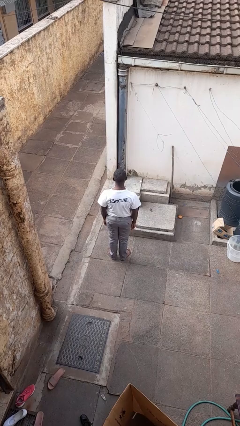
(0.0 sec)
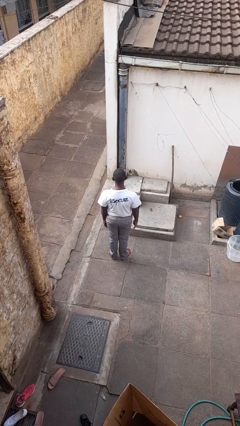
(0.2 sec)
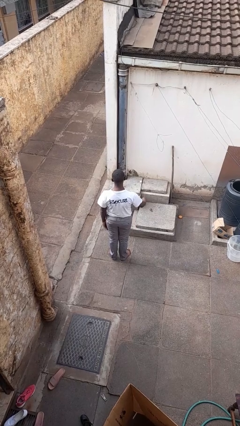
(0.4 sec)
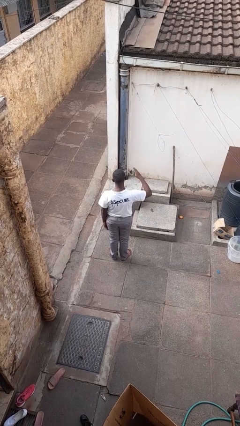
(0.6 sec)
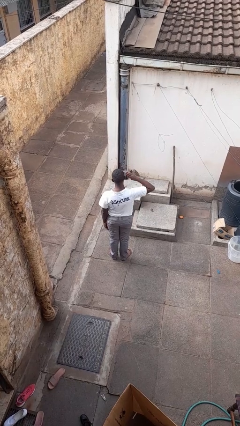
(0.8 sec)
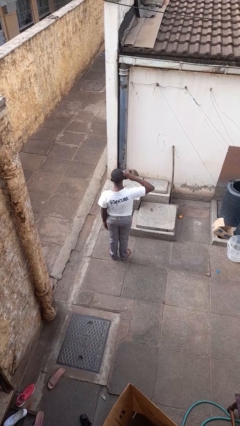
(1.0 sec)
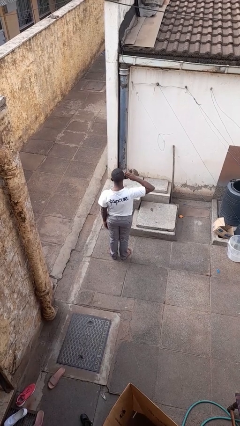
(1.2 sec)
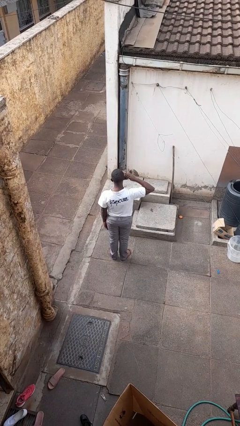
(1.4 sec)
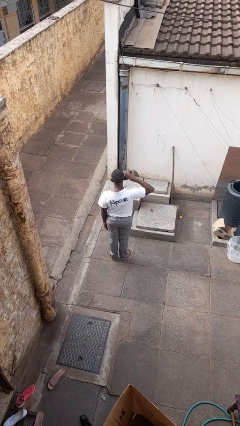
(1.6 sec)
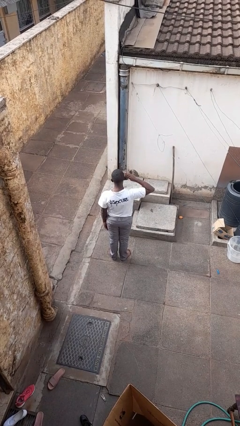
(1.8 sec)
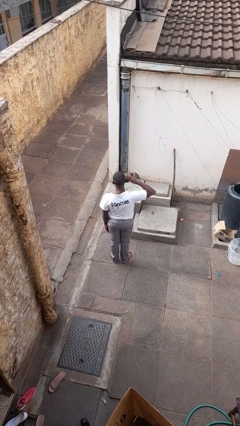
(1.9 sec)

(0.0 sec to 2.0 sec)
person salutes

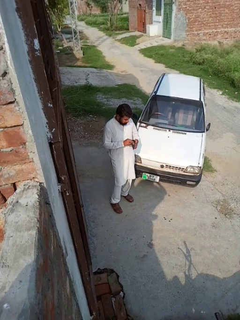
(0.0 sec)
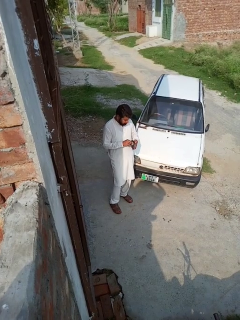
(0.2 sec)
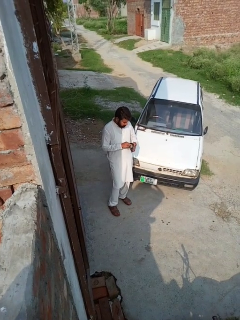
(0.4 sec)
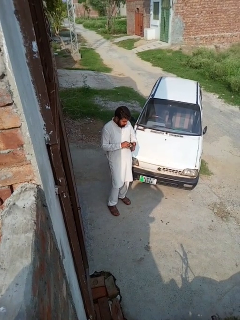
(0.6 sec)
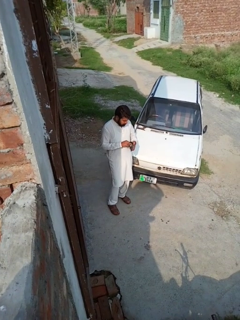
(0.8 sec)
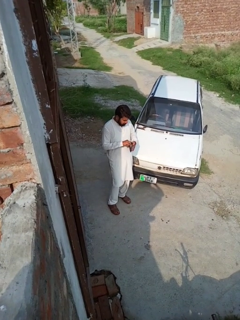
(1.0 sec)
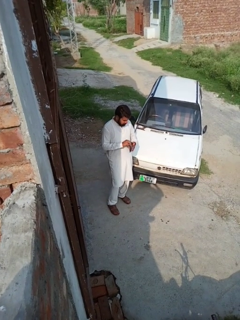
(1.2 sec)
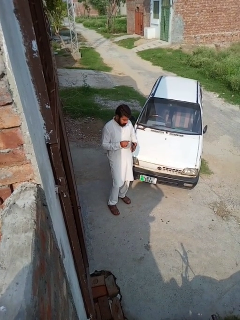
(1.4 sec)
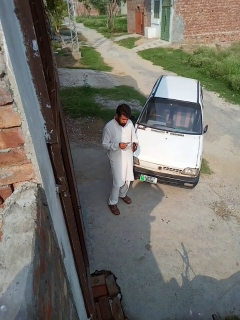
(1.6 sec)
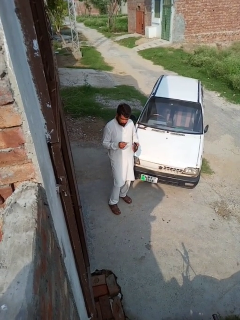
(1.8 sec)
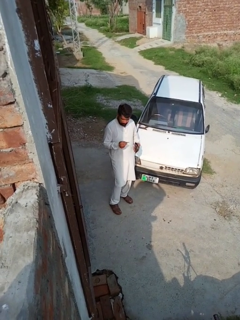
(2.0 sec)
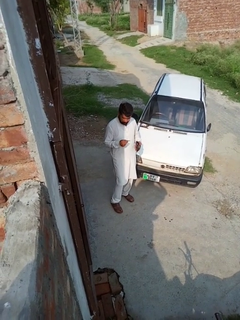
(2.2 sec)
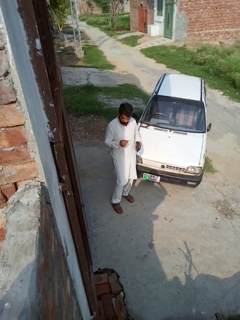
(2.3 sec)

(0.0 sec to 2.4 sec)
person takes object from purse

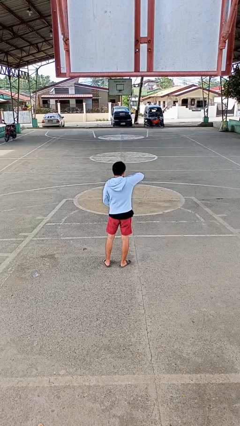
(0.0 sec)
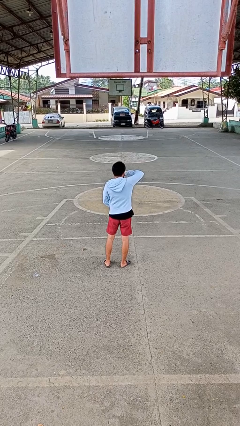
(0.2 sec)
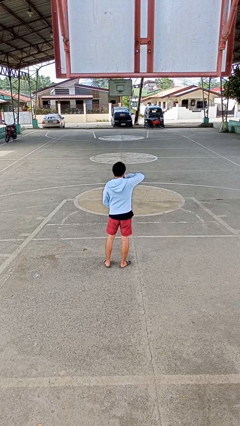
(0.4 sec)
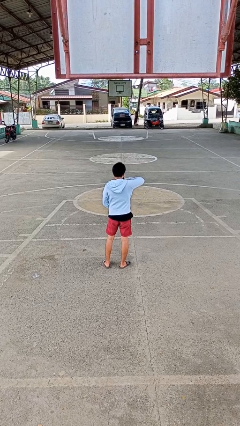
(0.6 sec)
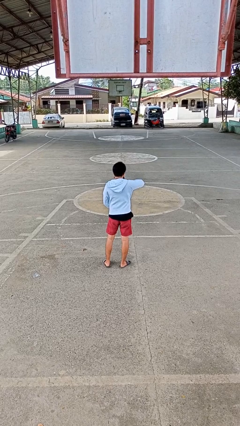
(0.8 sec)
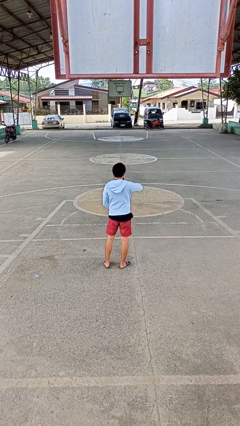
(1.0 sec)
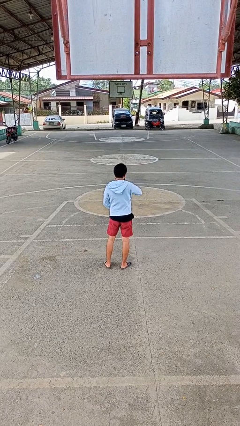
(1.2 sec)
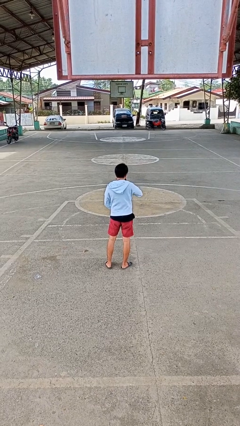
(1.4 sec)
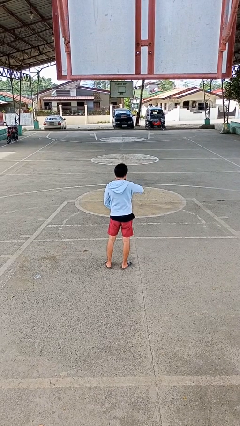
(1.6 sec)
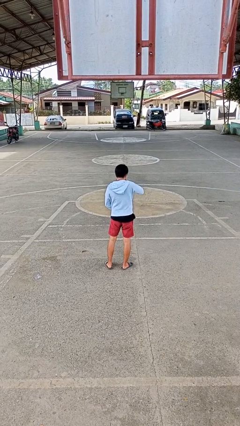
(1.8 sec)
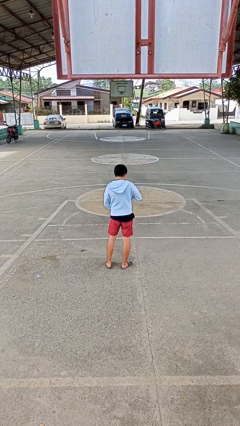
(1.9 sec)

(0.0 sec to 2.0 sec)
person zips up jacket

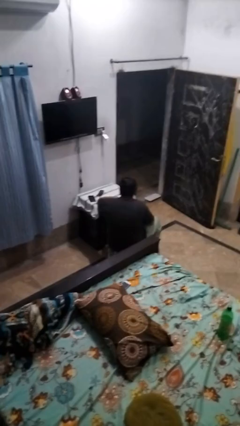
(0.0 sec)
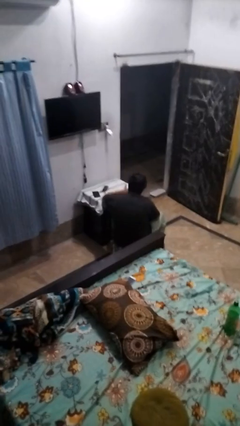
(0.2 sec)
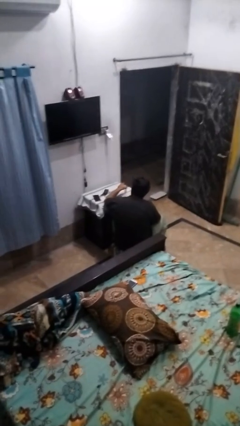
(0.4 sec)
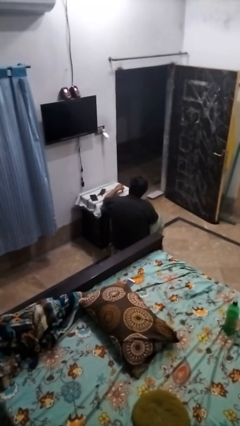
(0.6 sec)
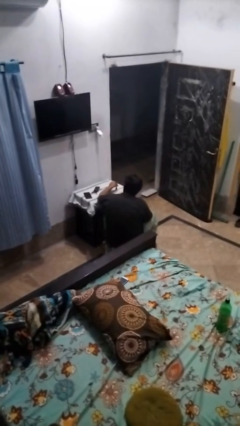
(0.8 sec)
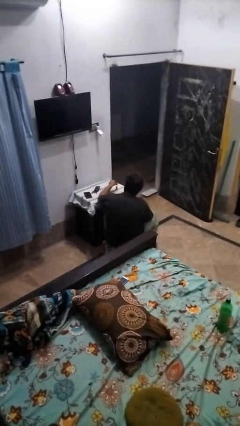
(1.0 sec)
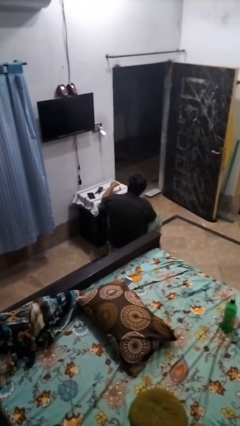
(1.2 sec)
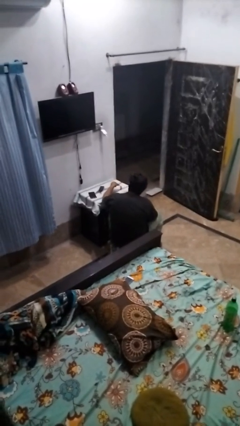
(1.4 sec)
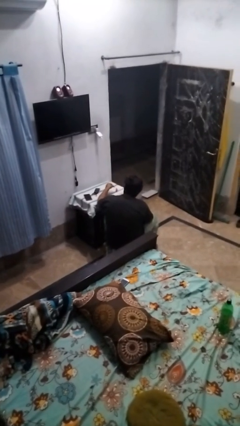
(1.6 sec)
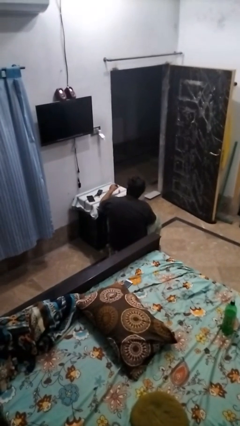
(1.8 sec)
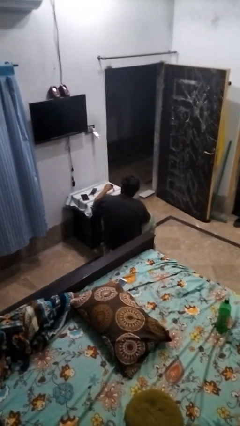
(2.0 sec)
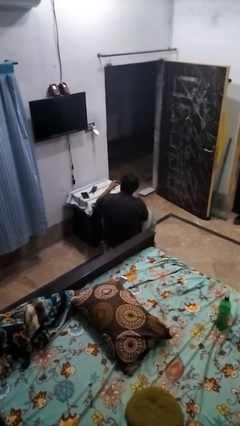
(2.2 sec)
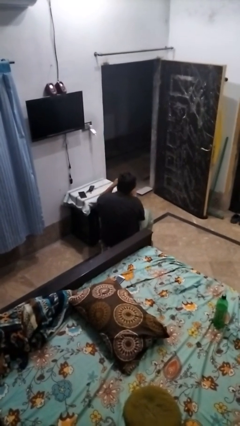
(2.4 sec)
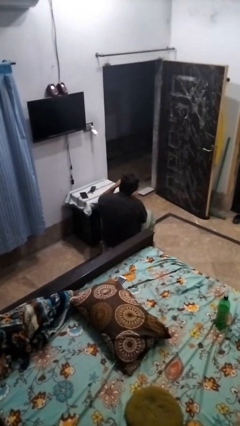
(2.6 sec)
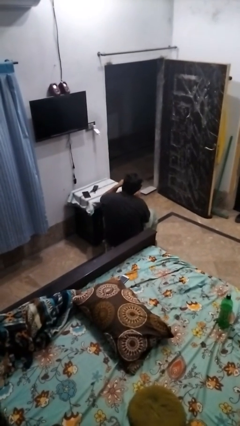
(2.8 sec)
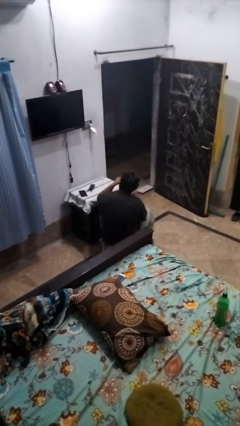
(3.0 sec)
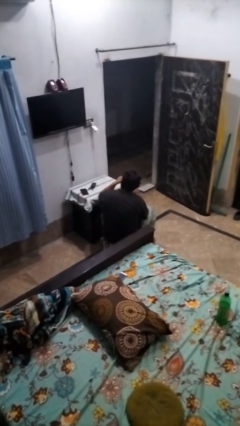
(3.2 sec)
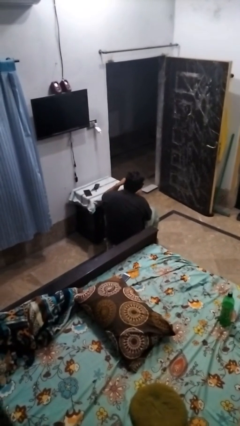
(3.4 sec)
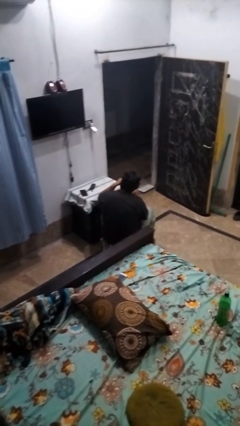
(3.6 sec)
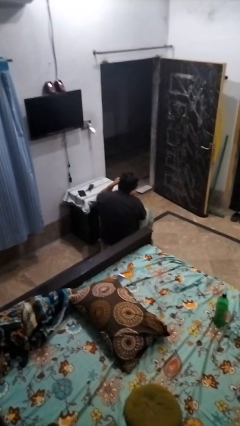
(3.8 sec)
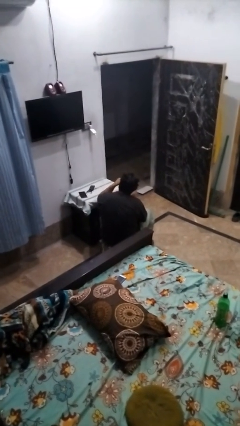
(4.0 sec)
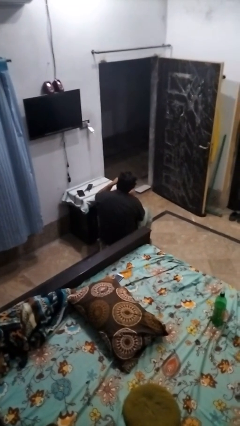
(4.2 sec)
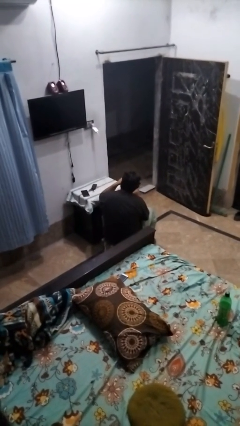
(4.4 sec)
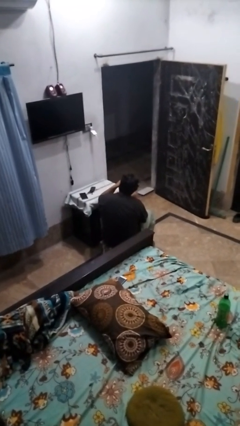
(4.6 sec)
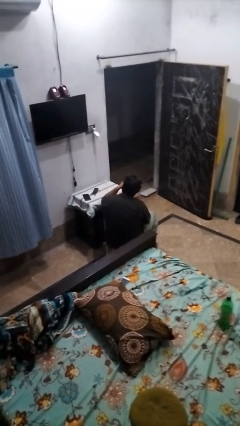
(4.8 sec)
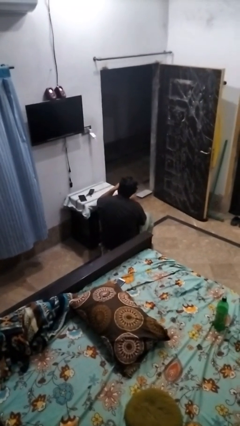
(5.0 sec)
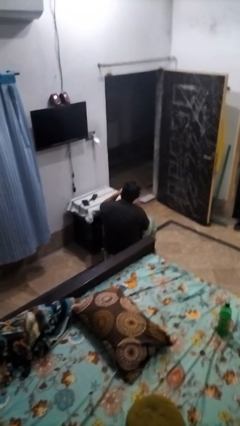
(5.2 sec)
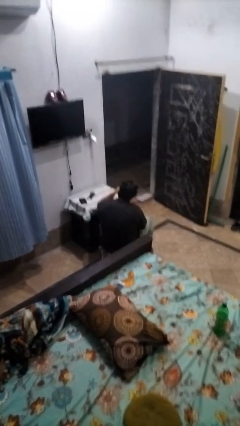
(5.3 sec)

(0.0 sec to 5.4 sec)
person paints fingernails

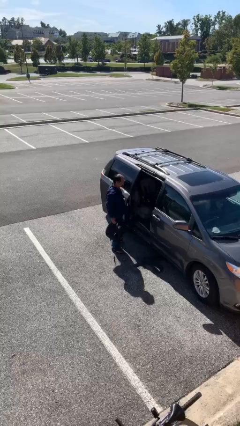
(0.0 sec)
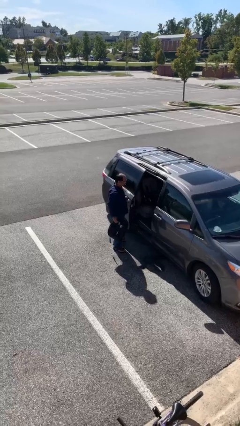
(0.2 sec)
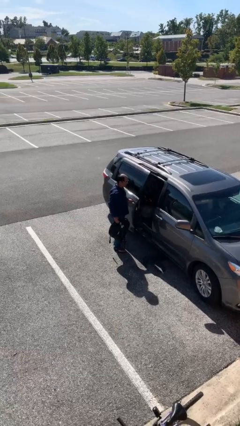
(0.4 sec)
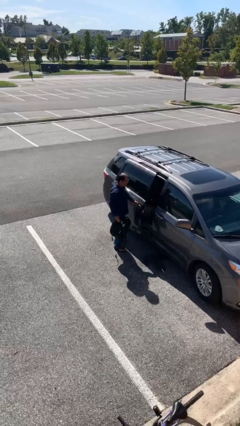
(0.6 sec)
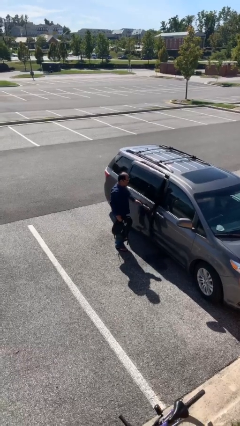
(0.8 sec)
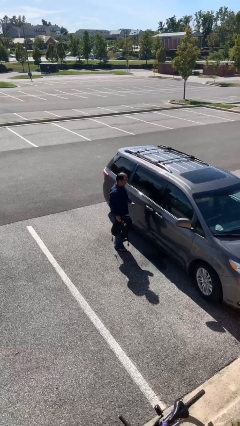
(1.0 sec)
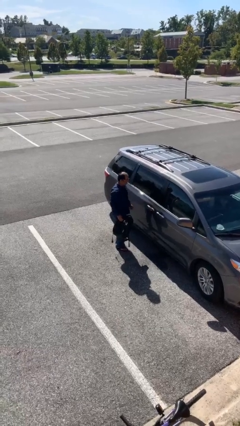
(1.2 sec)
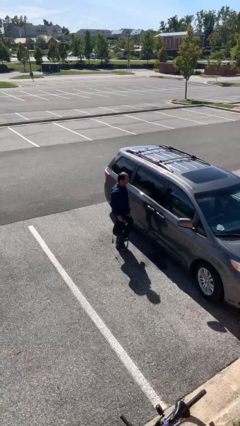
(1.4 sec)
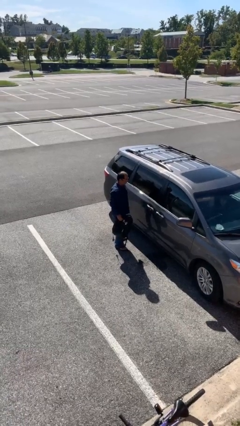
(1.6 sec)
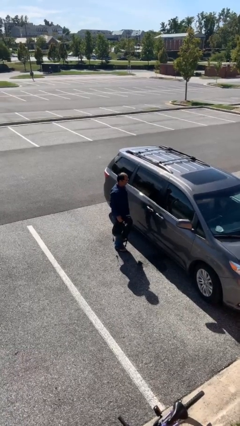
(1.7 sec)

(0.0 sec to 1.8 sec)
person closes car door

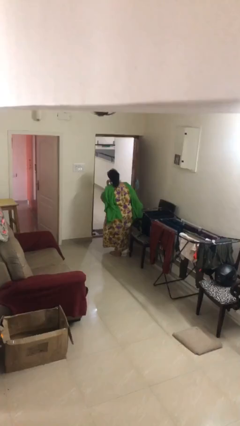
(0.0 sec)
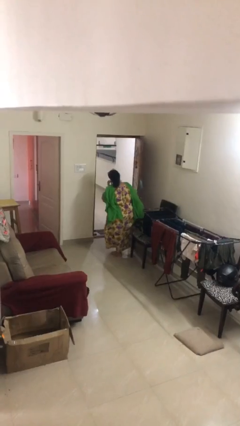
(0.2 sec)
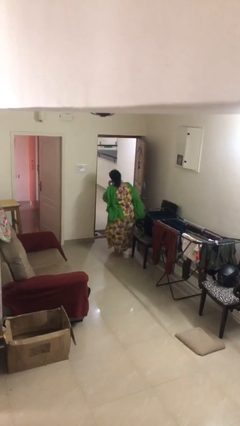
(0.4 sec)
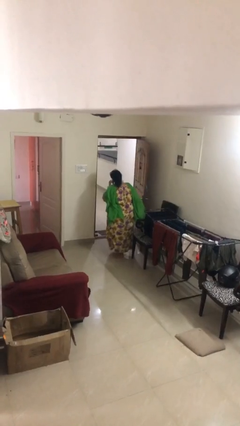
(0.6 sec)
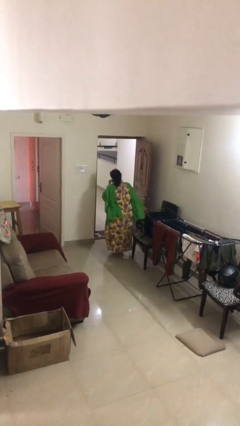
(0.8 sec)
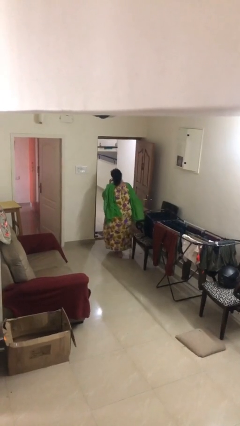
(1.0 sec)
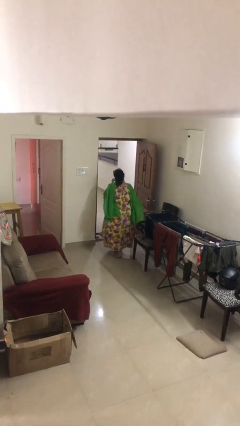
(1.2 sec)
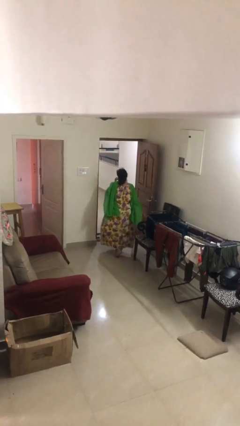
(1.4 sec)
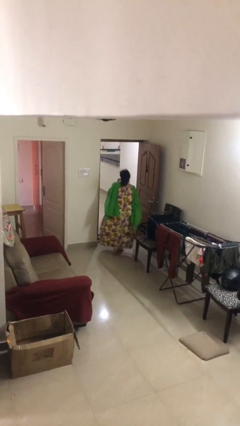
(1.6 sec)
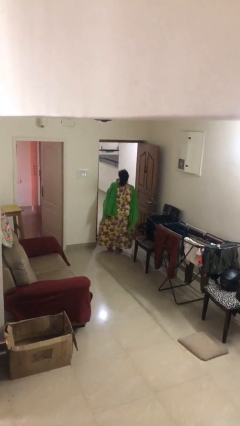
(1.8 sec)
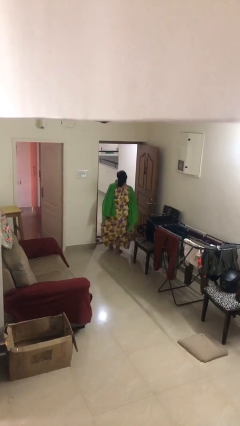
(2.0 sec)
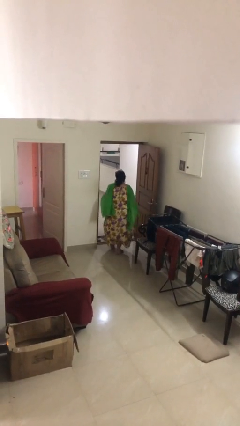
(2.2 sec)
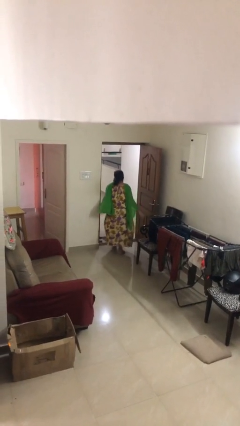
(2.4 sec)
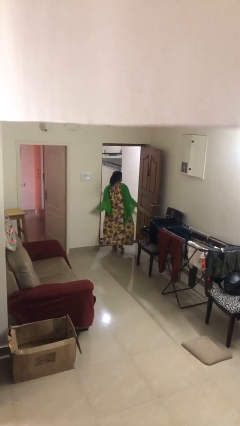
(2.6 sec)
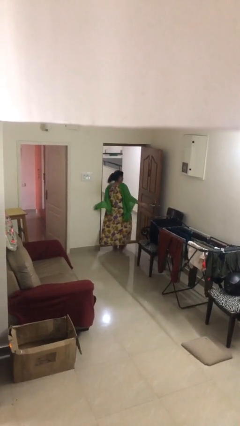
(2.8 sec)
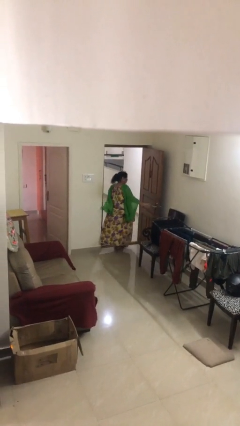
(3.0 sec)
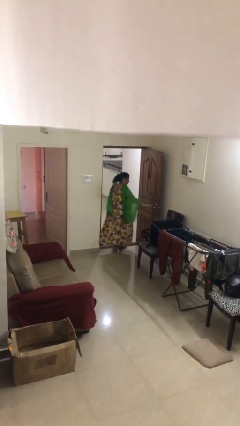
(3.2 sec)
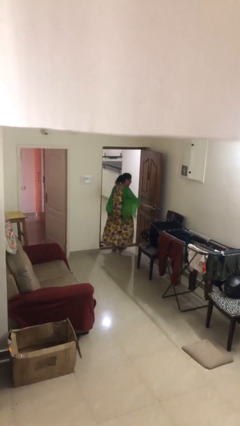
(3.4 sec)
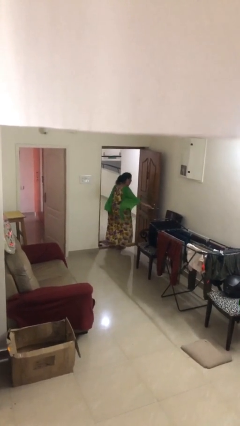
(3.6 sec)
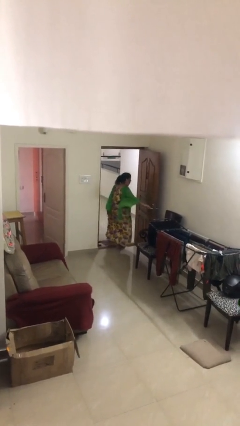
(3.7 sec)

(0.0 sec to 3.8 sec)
person exits scene through structure

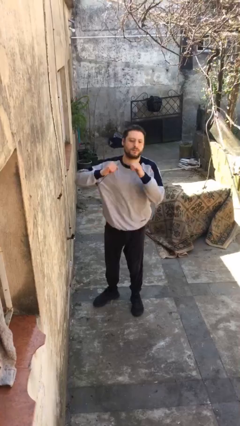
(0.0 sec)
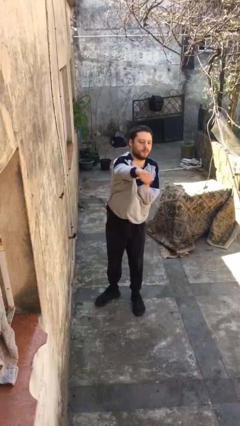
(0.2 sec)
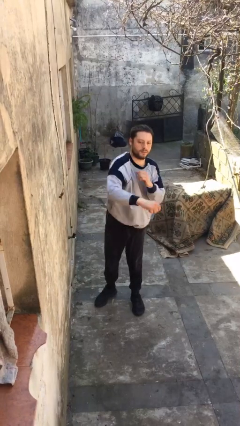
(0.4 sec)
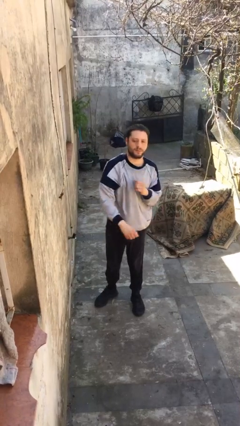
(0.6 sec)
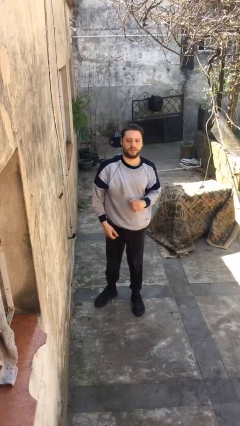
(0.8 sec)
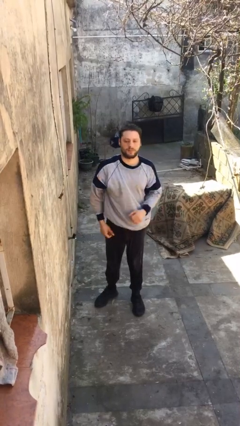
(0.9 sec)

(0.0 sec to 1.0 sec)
person punches
